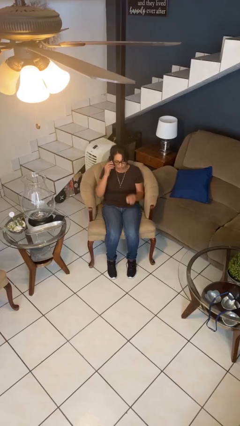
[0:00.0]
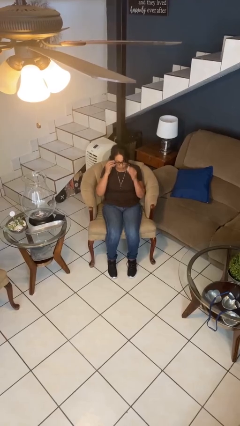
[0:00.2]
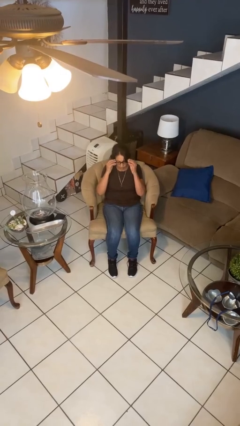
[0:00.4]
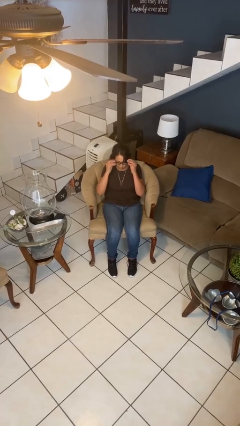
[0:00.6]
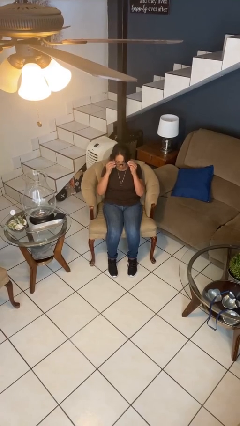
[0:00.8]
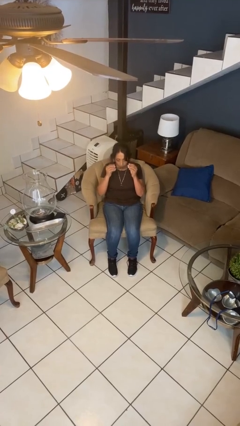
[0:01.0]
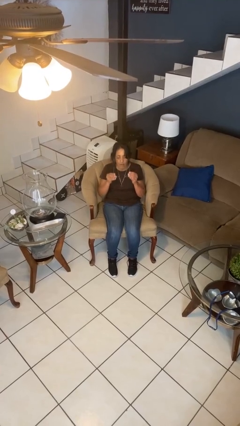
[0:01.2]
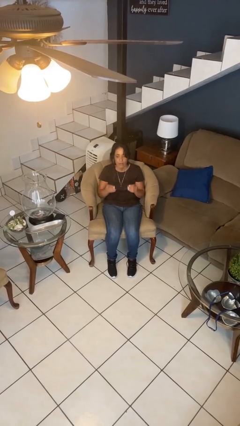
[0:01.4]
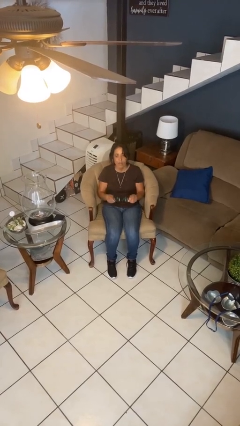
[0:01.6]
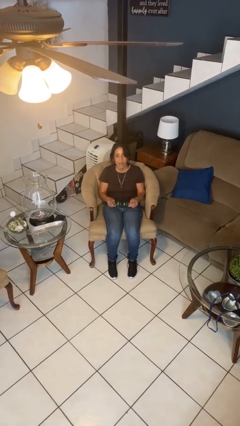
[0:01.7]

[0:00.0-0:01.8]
person takes off glasses

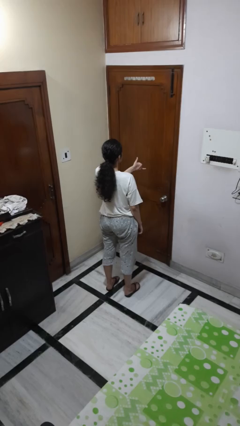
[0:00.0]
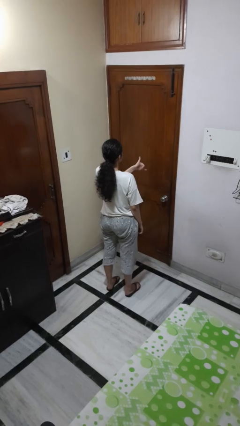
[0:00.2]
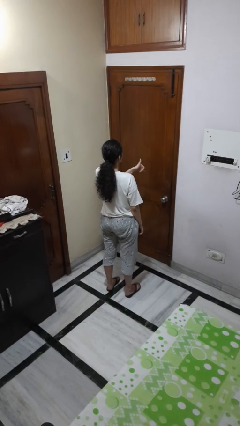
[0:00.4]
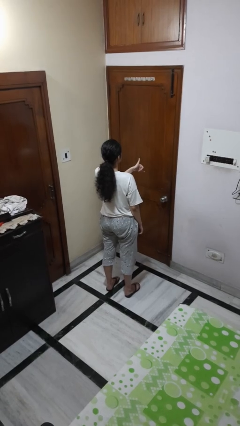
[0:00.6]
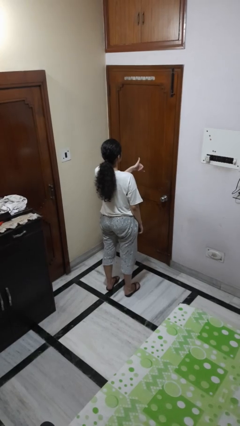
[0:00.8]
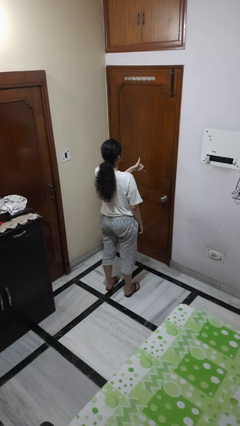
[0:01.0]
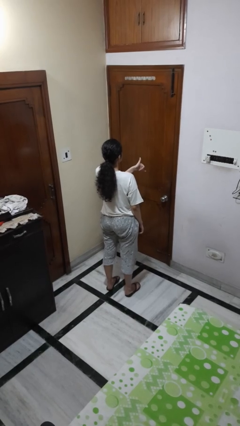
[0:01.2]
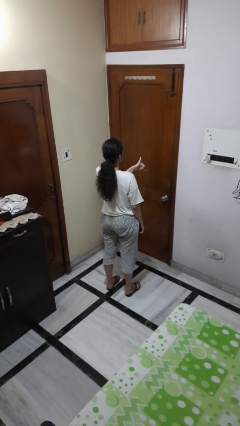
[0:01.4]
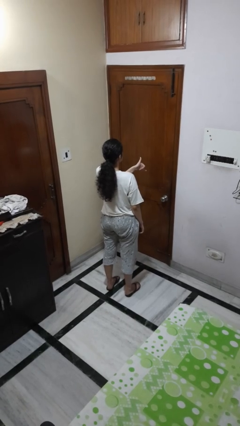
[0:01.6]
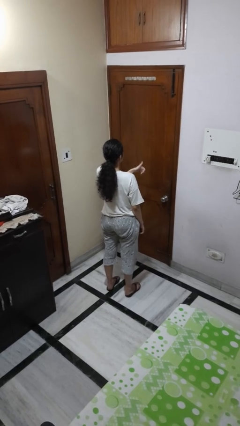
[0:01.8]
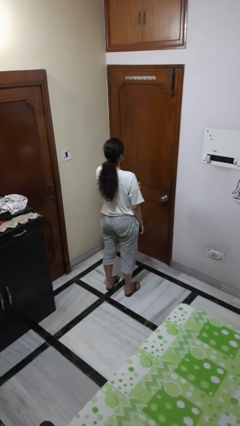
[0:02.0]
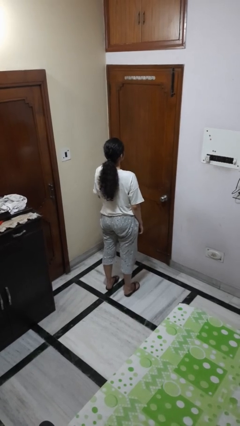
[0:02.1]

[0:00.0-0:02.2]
person gestures hang loose

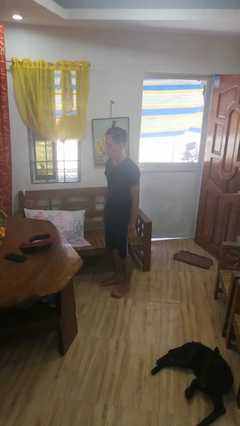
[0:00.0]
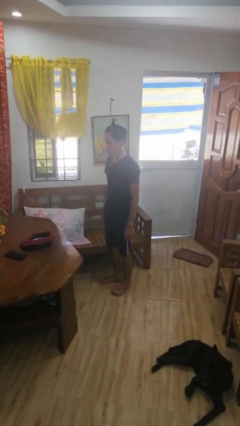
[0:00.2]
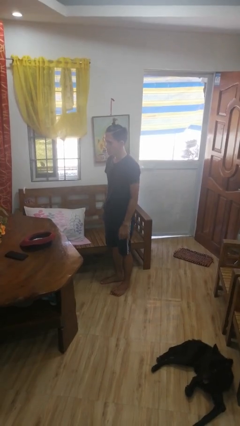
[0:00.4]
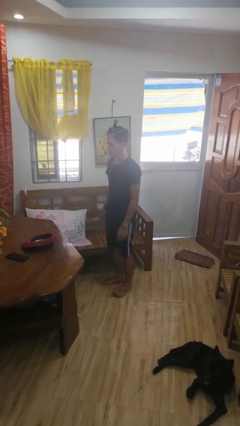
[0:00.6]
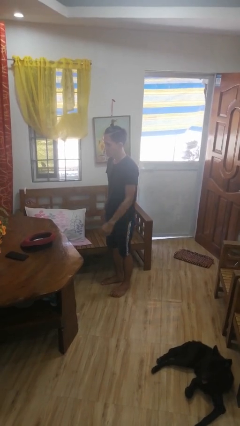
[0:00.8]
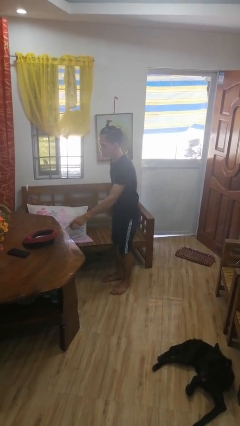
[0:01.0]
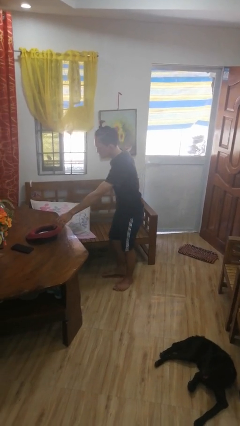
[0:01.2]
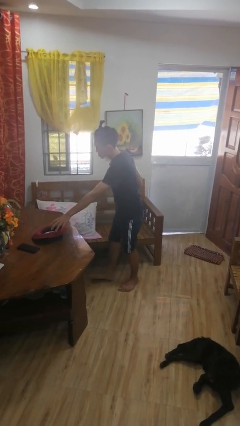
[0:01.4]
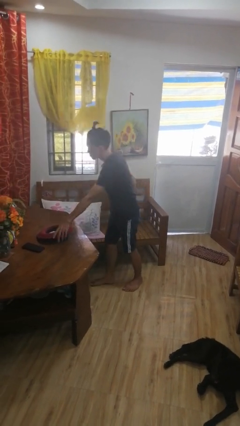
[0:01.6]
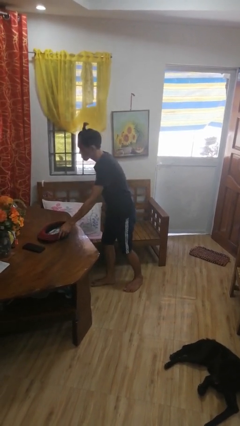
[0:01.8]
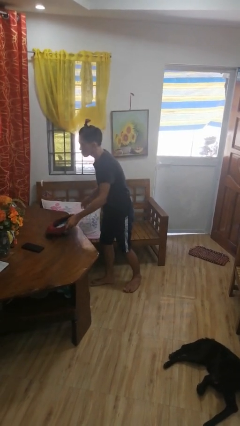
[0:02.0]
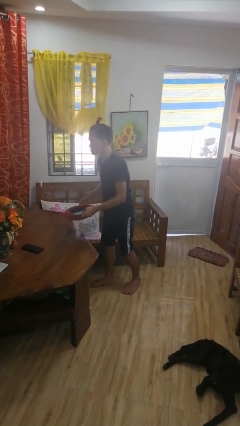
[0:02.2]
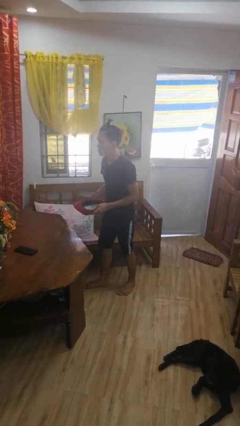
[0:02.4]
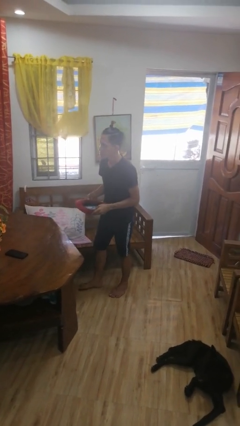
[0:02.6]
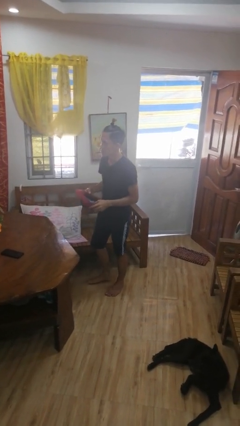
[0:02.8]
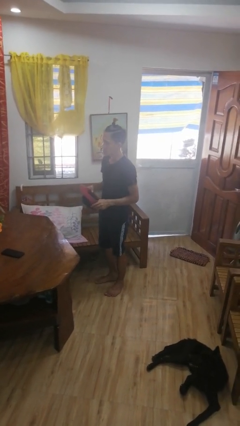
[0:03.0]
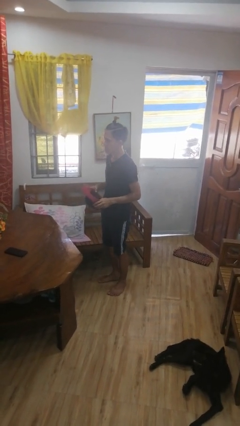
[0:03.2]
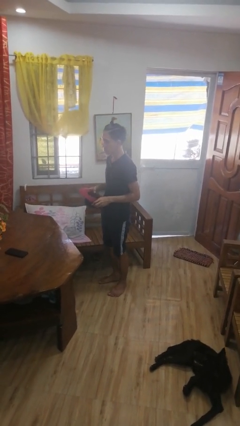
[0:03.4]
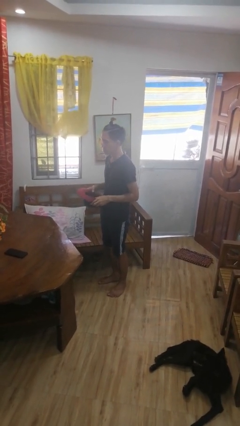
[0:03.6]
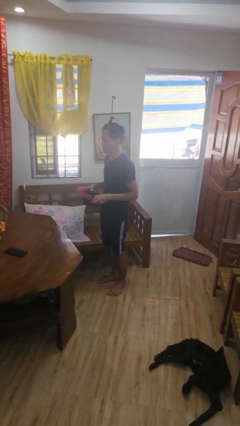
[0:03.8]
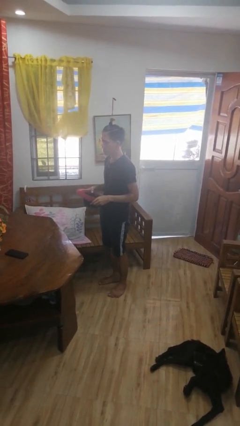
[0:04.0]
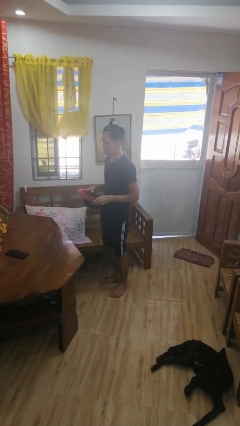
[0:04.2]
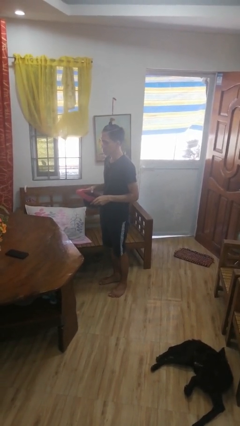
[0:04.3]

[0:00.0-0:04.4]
person picks up object from table

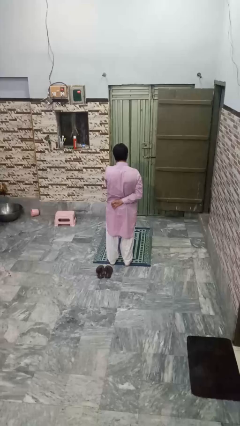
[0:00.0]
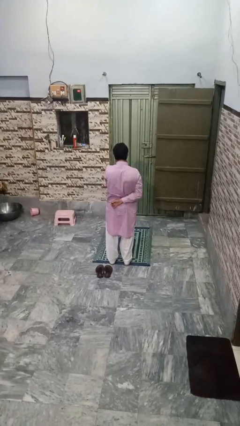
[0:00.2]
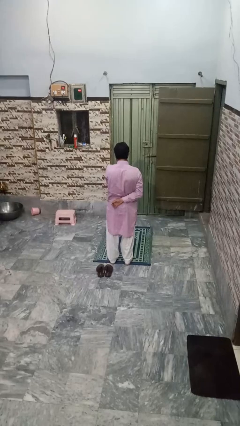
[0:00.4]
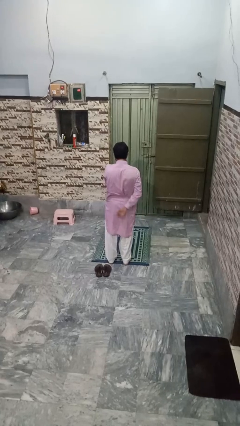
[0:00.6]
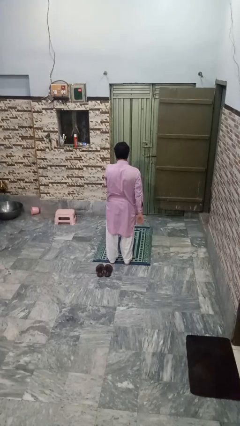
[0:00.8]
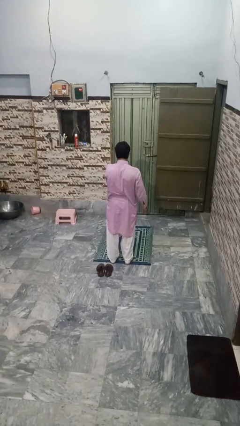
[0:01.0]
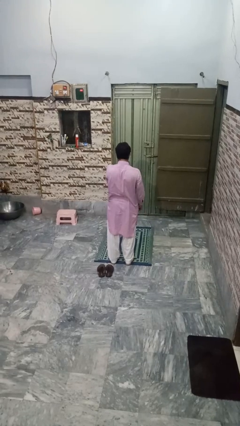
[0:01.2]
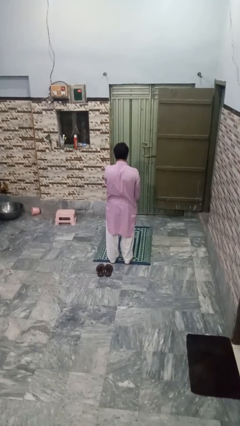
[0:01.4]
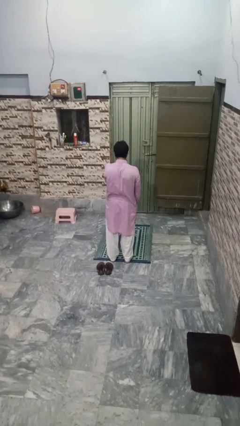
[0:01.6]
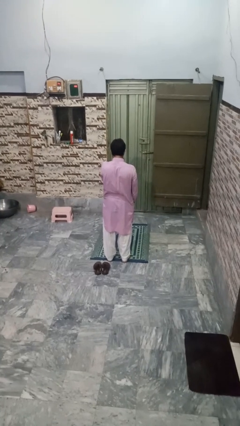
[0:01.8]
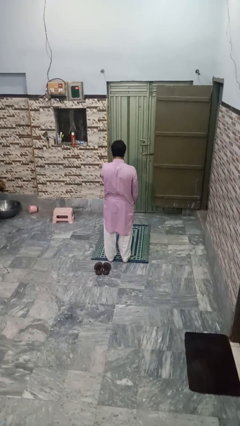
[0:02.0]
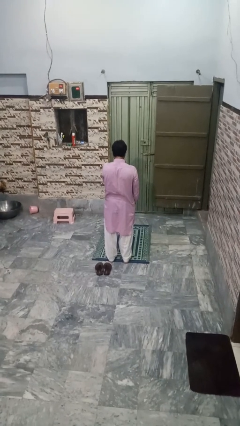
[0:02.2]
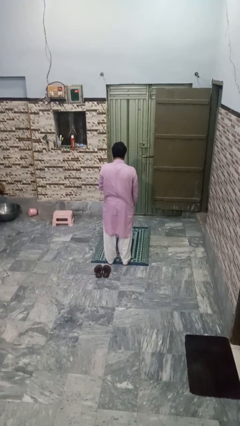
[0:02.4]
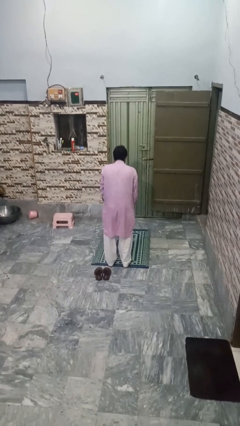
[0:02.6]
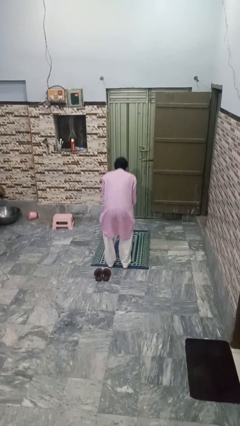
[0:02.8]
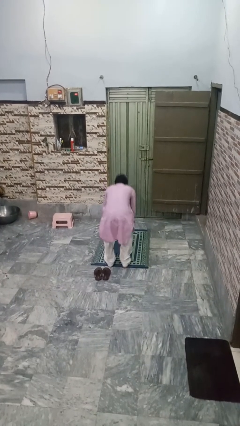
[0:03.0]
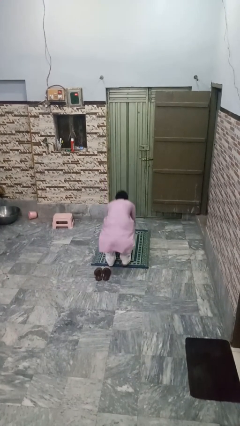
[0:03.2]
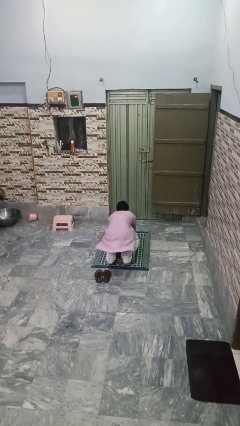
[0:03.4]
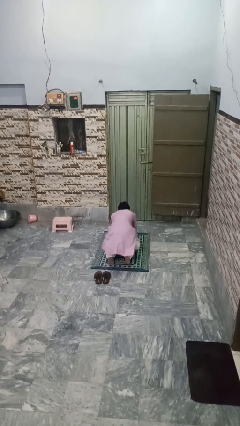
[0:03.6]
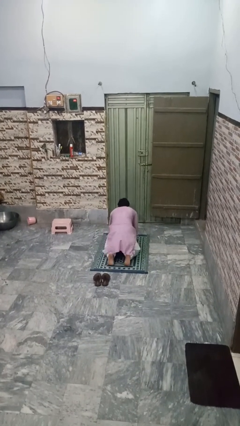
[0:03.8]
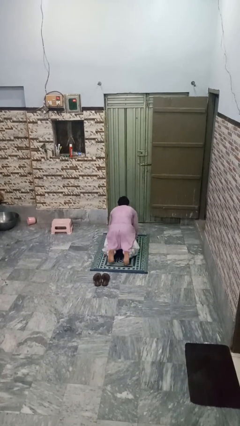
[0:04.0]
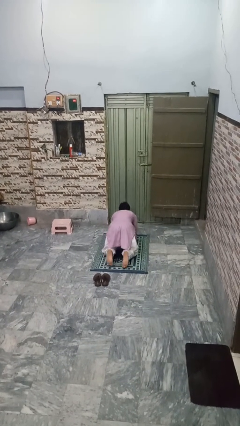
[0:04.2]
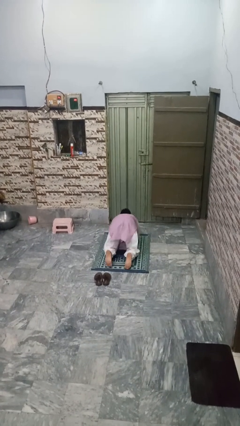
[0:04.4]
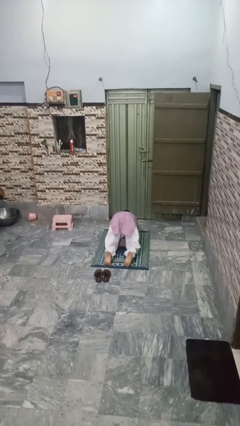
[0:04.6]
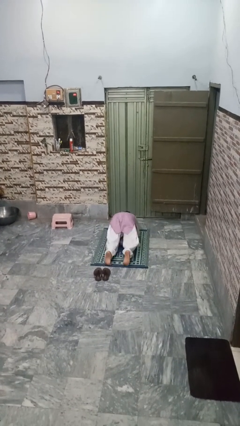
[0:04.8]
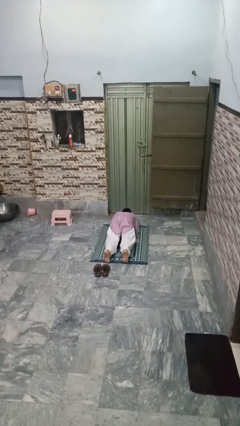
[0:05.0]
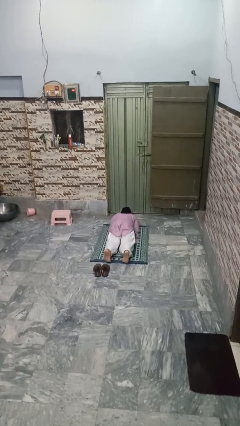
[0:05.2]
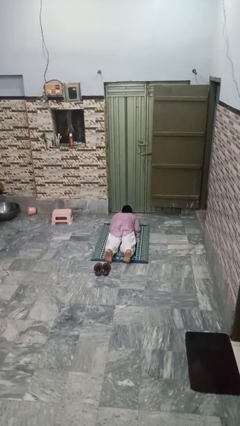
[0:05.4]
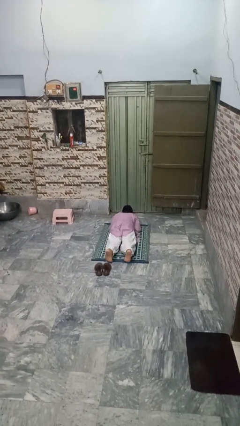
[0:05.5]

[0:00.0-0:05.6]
person exercises with plank

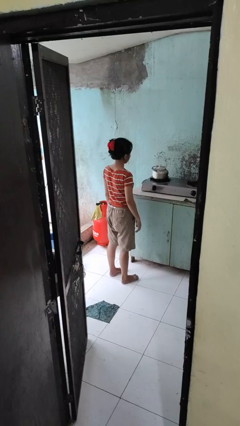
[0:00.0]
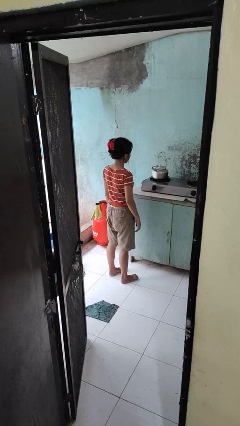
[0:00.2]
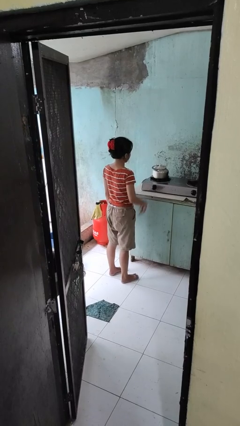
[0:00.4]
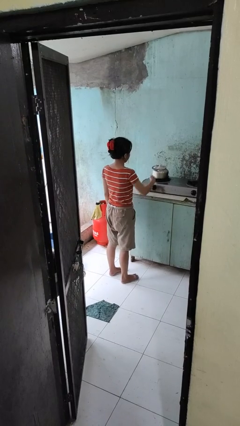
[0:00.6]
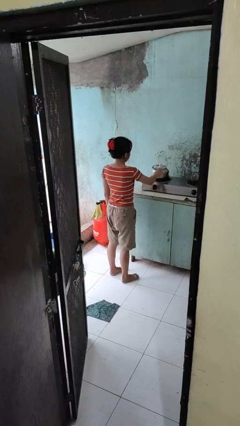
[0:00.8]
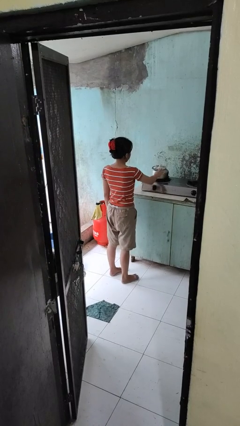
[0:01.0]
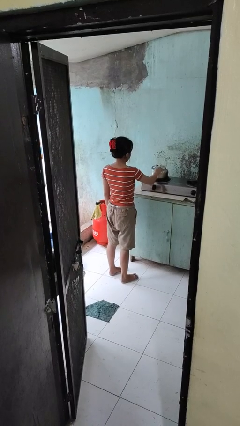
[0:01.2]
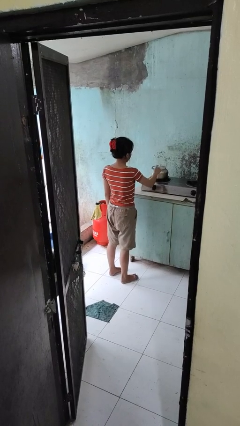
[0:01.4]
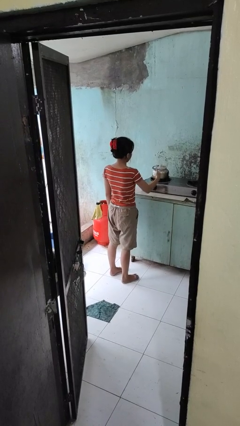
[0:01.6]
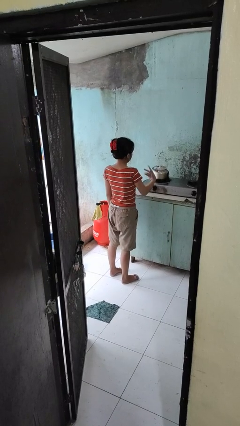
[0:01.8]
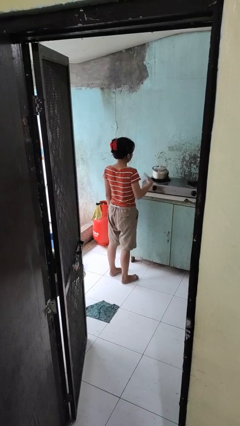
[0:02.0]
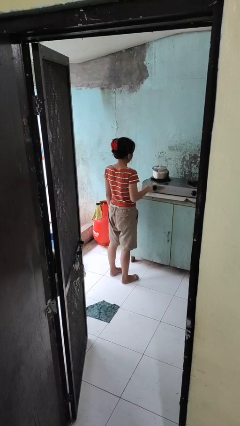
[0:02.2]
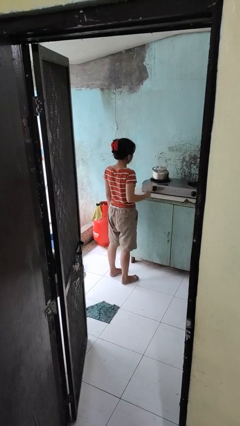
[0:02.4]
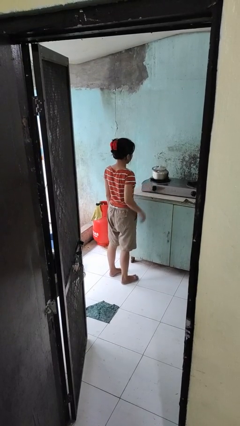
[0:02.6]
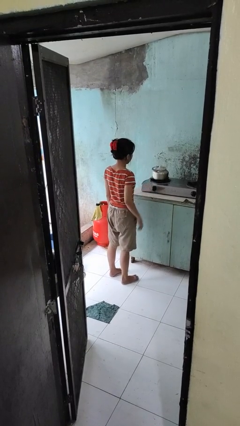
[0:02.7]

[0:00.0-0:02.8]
person burns hand

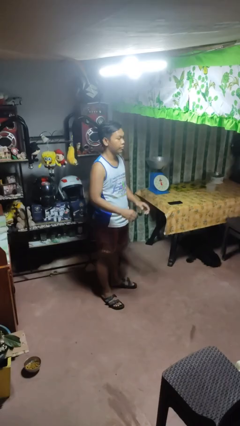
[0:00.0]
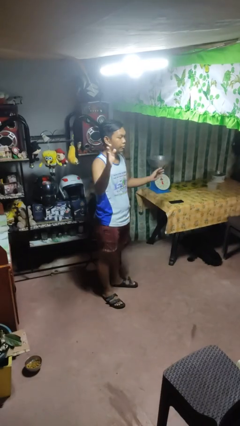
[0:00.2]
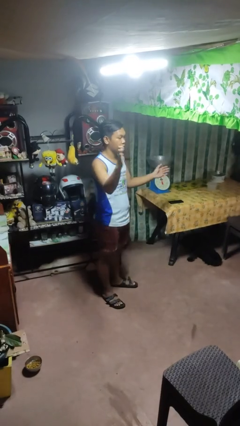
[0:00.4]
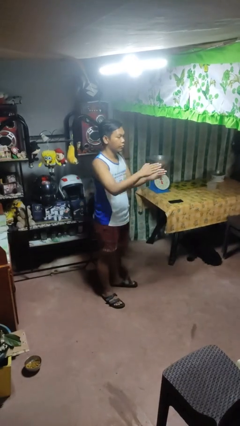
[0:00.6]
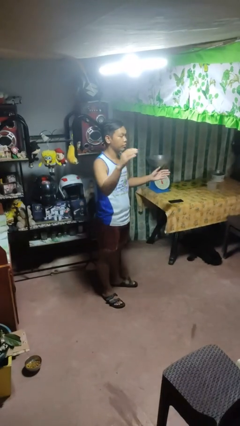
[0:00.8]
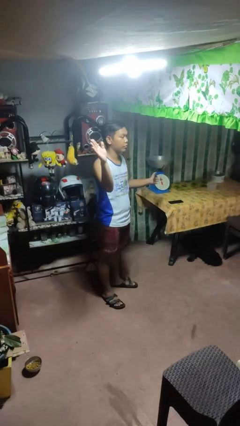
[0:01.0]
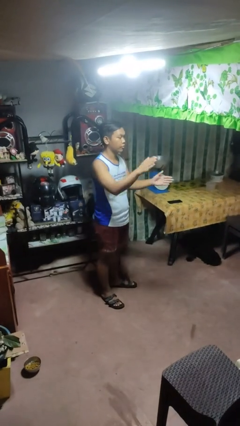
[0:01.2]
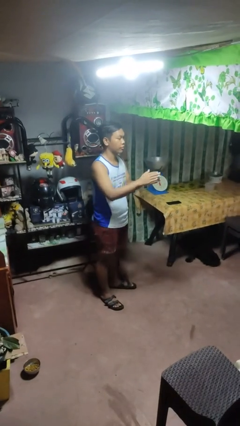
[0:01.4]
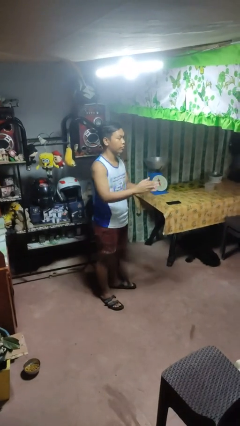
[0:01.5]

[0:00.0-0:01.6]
person gestures zoom out
